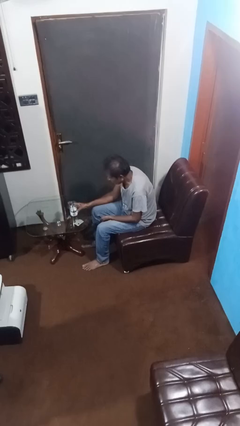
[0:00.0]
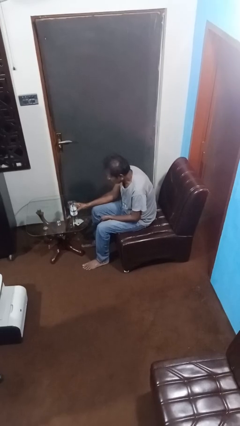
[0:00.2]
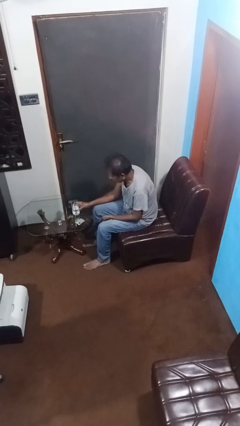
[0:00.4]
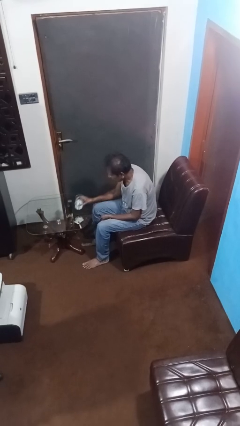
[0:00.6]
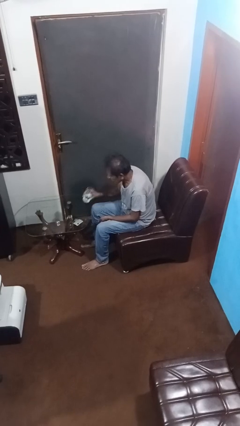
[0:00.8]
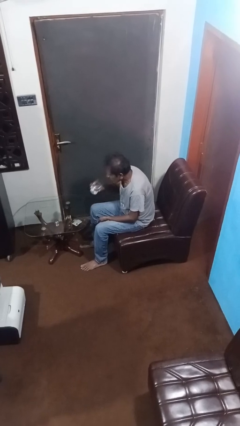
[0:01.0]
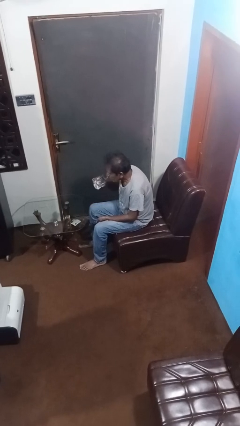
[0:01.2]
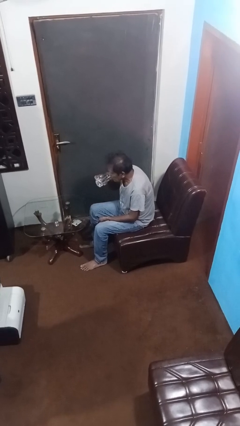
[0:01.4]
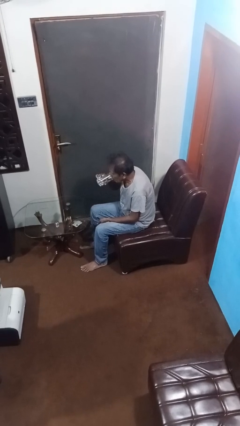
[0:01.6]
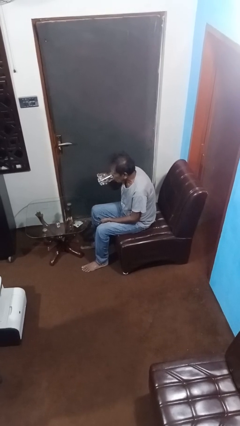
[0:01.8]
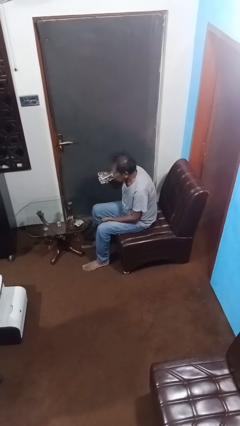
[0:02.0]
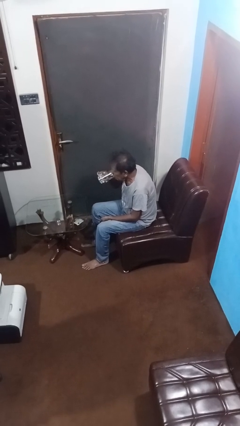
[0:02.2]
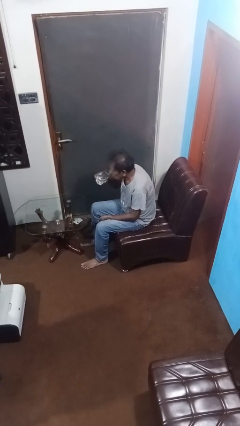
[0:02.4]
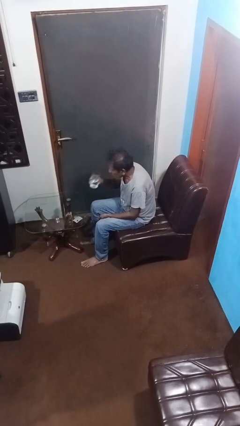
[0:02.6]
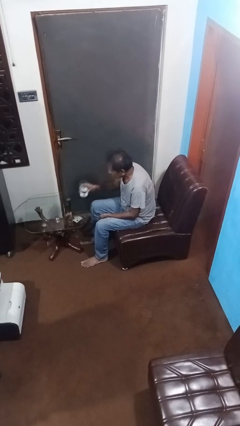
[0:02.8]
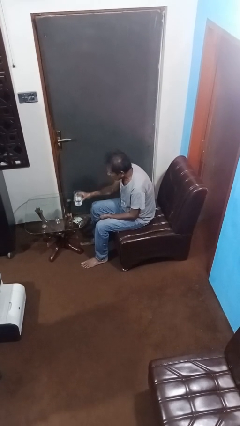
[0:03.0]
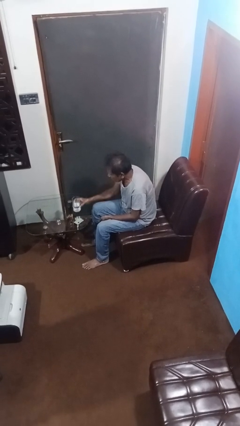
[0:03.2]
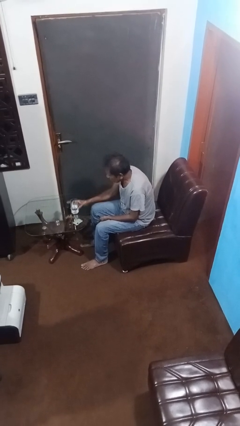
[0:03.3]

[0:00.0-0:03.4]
person drinks from cup

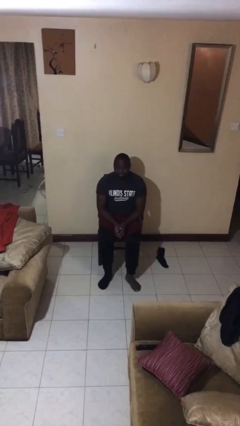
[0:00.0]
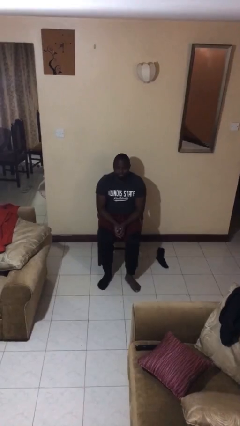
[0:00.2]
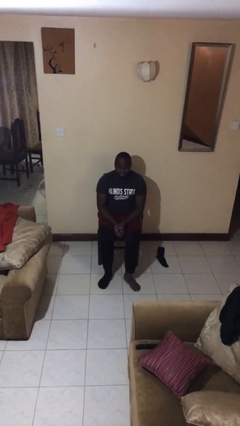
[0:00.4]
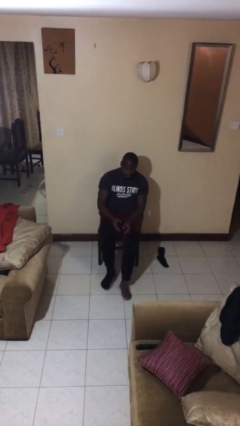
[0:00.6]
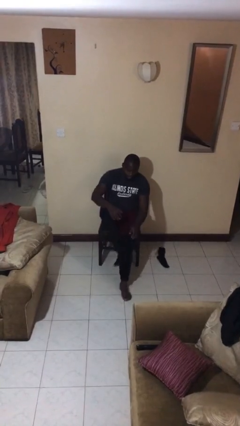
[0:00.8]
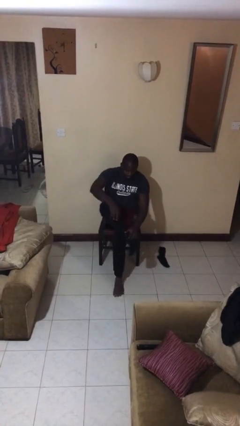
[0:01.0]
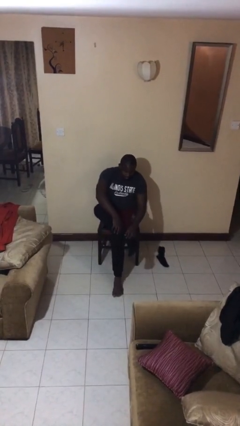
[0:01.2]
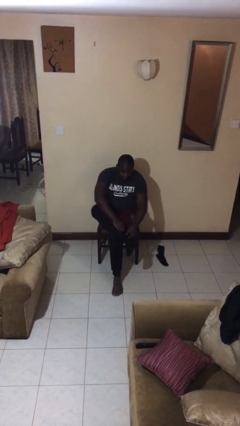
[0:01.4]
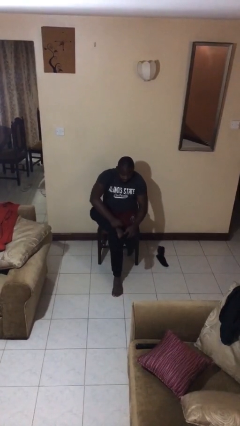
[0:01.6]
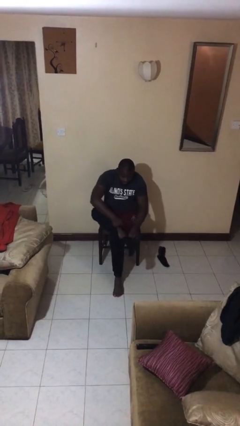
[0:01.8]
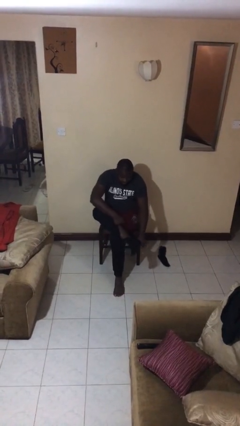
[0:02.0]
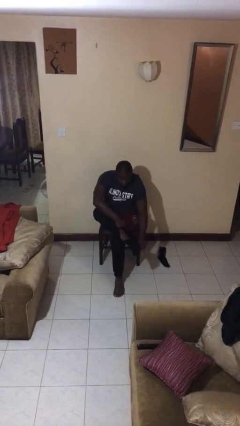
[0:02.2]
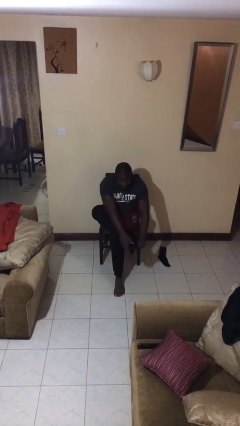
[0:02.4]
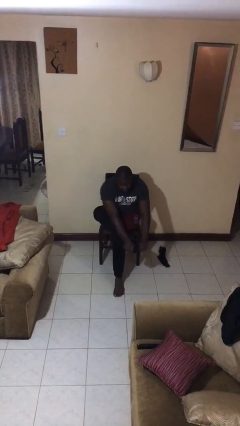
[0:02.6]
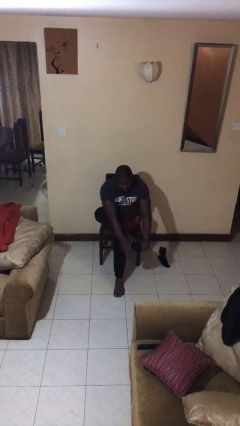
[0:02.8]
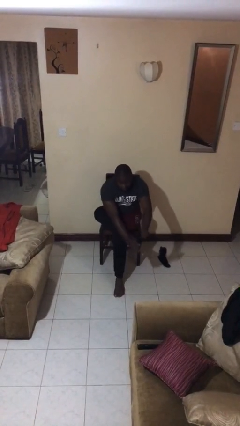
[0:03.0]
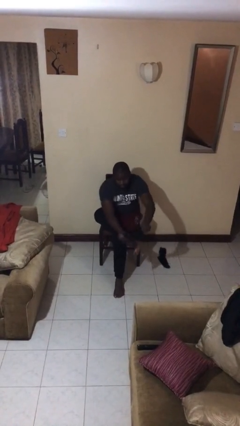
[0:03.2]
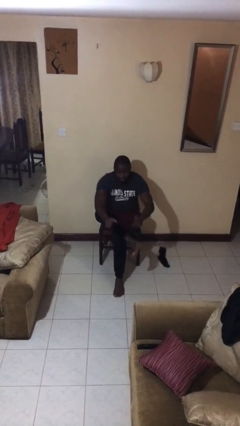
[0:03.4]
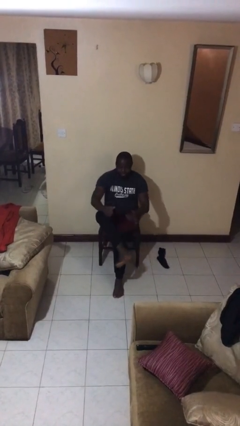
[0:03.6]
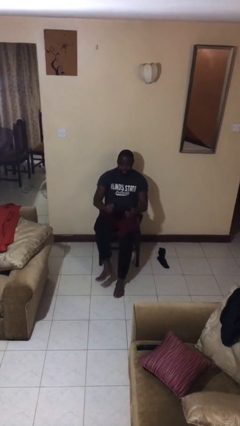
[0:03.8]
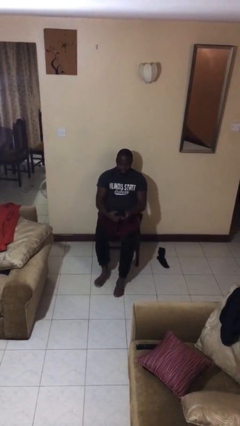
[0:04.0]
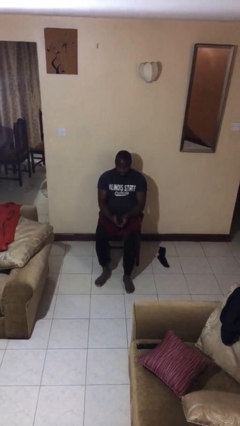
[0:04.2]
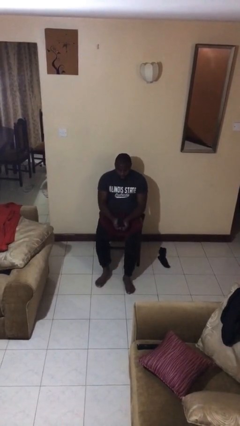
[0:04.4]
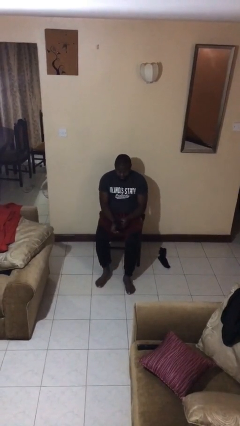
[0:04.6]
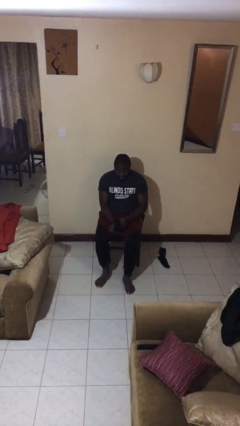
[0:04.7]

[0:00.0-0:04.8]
person takes off socks

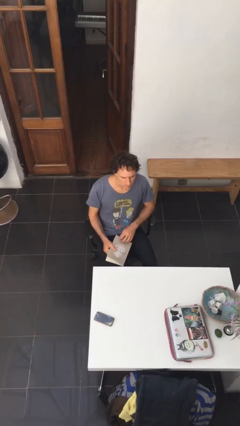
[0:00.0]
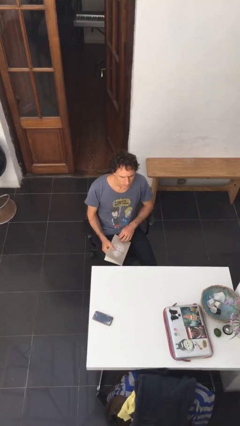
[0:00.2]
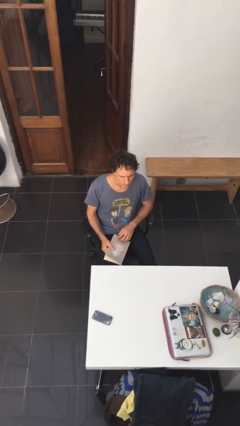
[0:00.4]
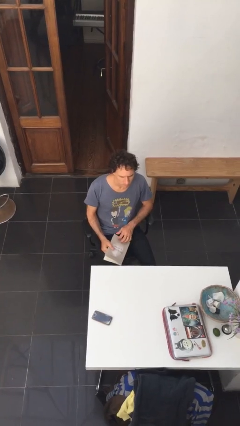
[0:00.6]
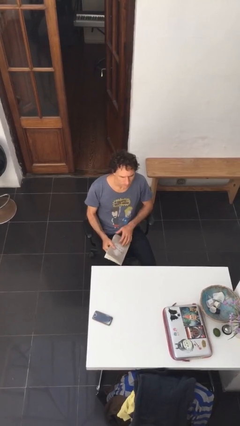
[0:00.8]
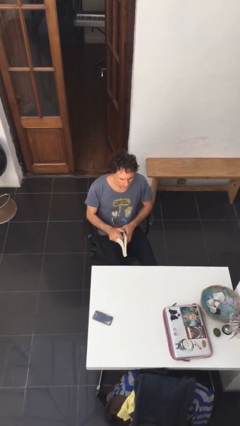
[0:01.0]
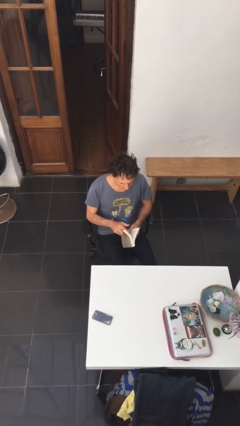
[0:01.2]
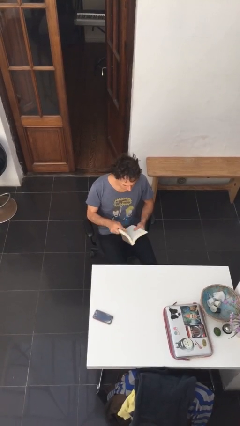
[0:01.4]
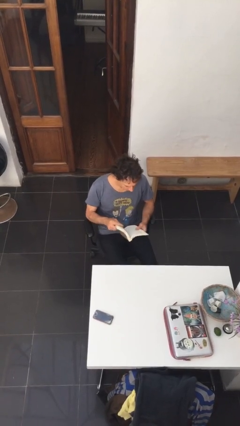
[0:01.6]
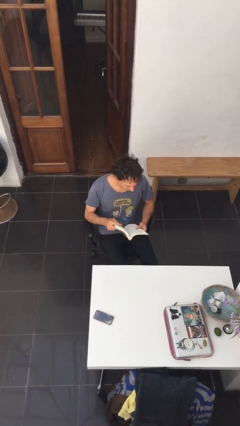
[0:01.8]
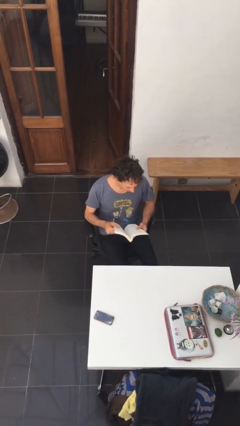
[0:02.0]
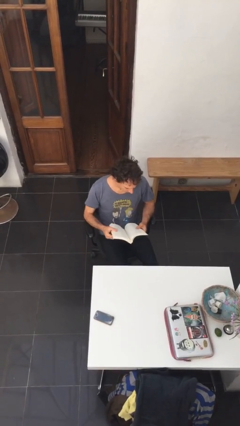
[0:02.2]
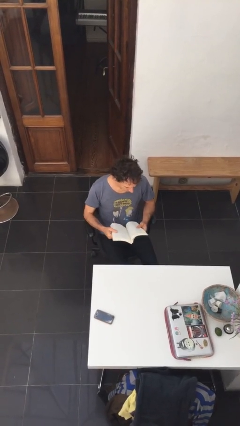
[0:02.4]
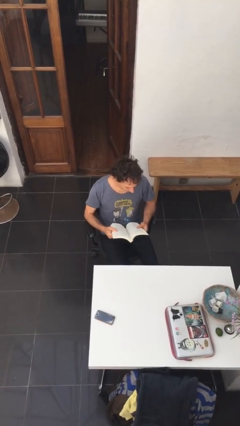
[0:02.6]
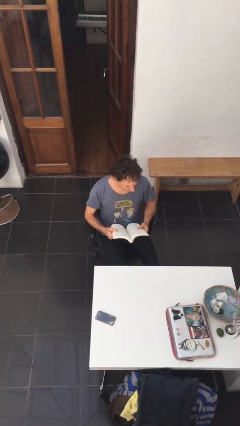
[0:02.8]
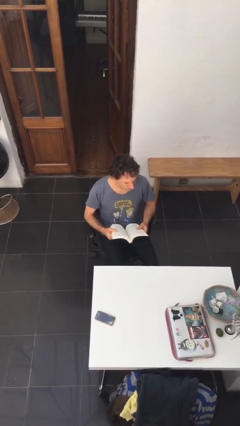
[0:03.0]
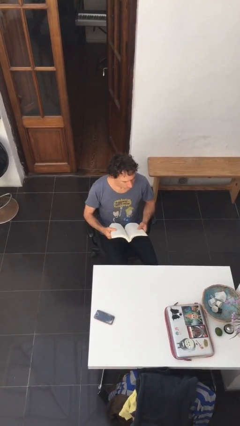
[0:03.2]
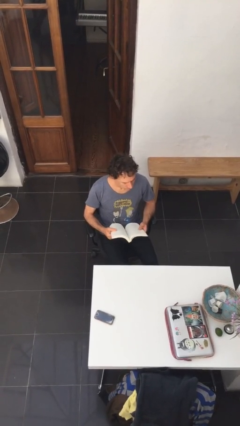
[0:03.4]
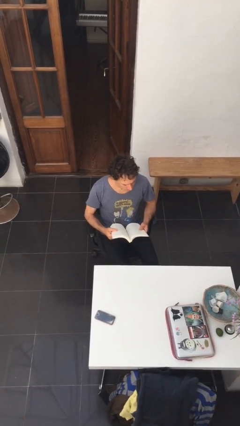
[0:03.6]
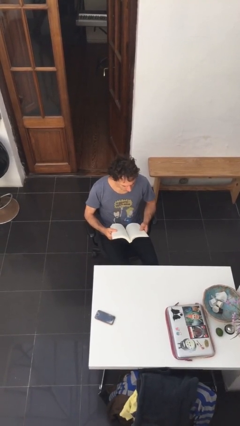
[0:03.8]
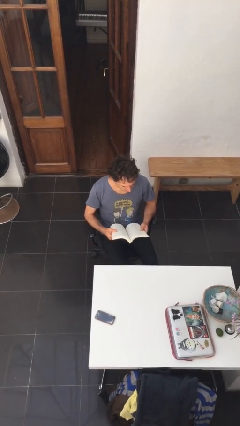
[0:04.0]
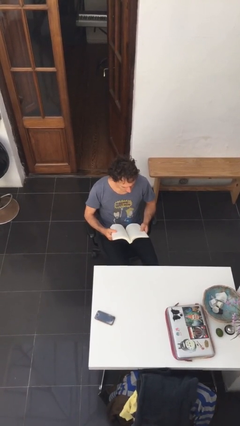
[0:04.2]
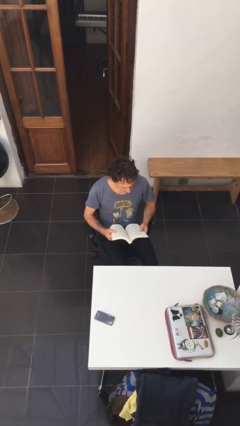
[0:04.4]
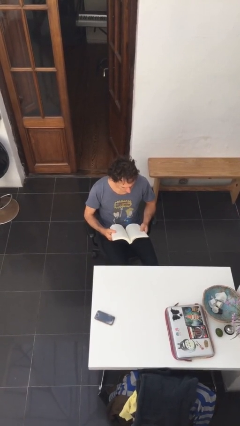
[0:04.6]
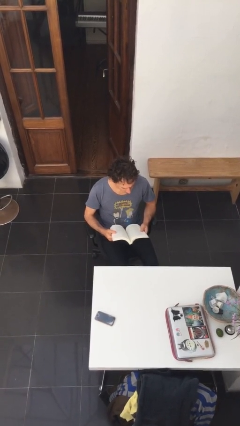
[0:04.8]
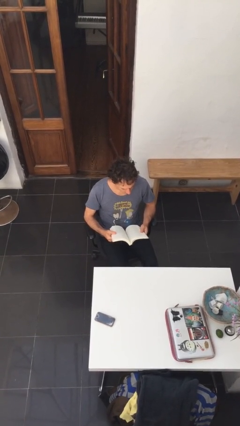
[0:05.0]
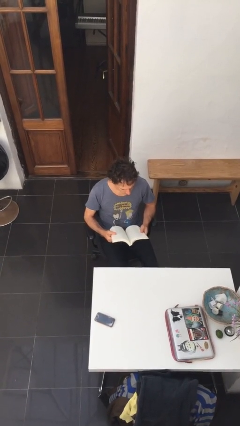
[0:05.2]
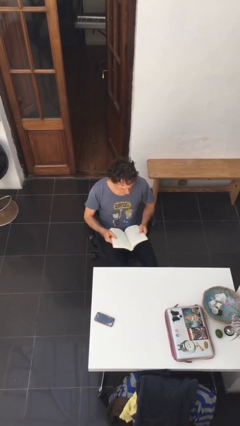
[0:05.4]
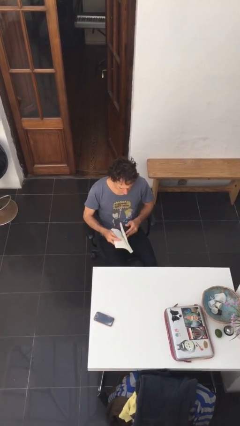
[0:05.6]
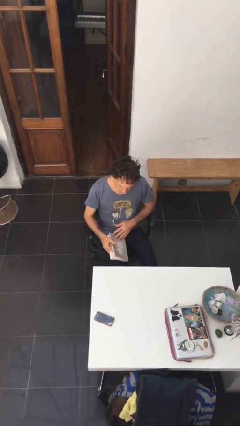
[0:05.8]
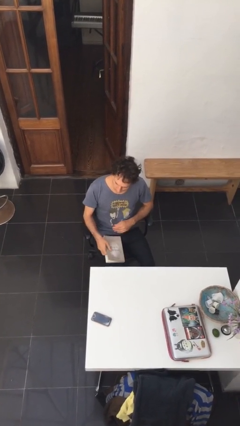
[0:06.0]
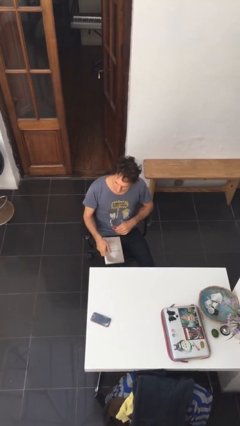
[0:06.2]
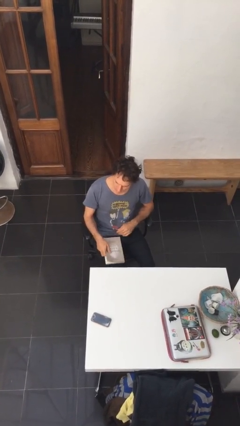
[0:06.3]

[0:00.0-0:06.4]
person reads document

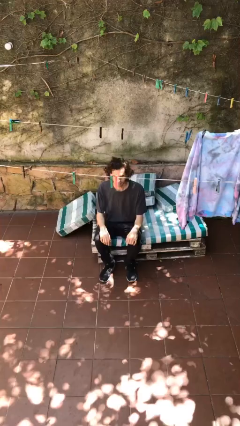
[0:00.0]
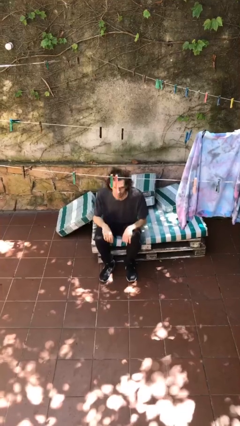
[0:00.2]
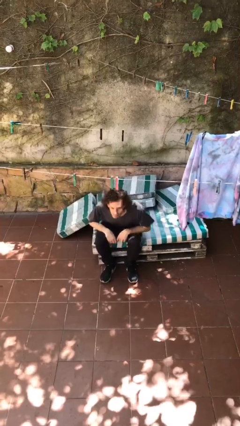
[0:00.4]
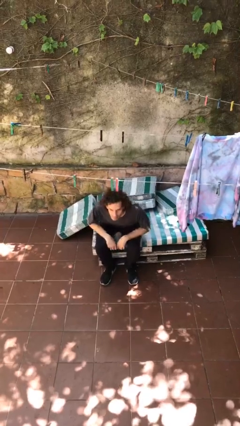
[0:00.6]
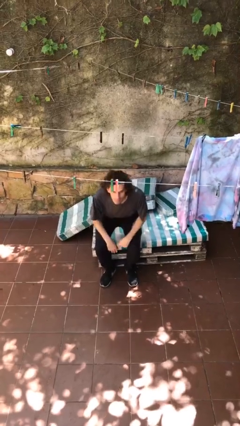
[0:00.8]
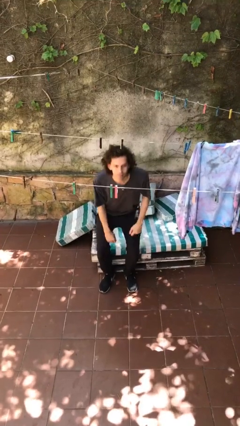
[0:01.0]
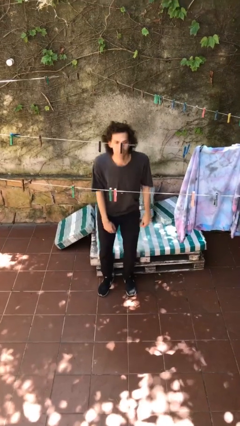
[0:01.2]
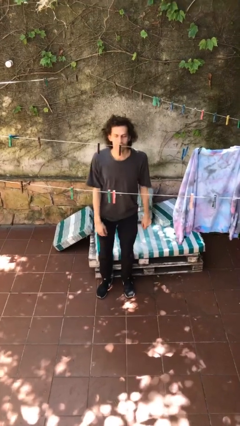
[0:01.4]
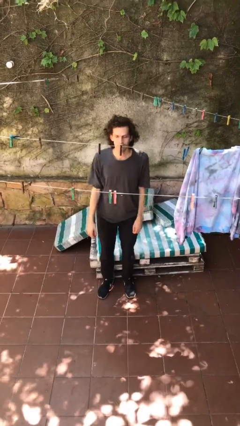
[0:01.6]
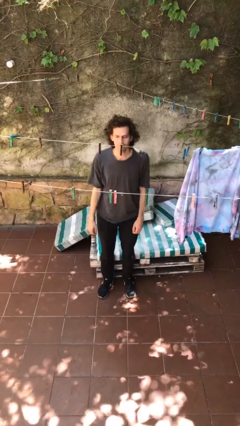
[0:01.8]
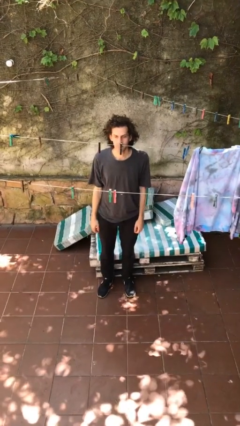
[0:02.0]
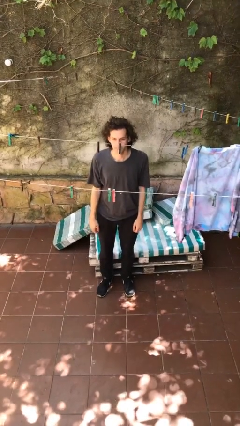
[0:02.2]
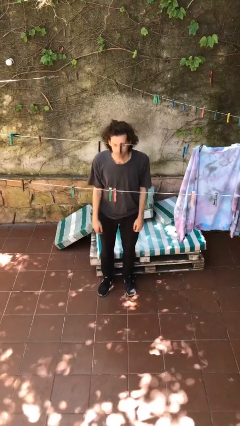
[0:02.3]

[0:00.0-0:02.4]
person stands up

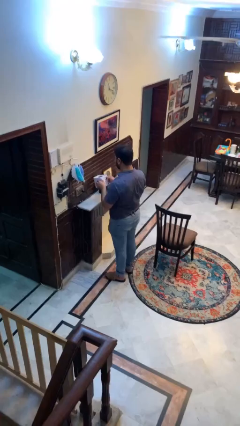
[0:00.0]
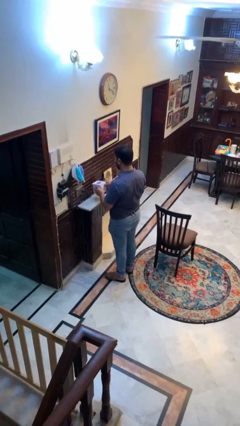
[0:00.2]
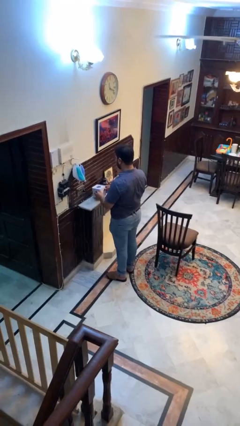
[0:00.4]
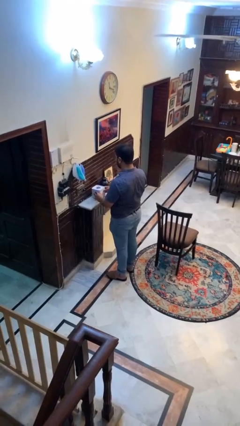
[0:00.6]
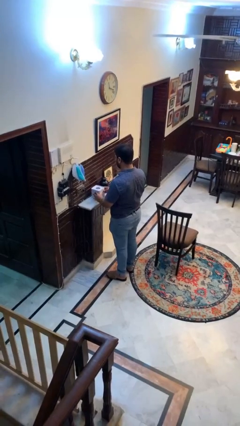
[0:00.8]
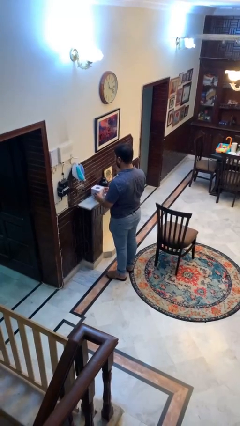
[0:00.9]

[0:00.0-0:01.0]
person puts down object on countertop
